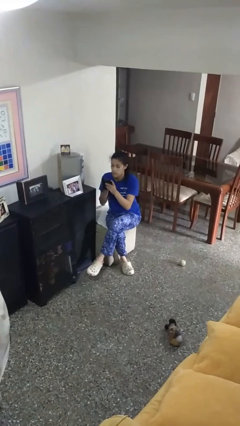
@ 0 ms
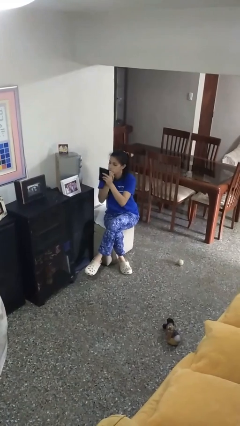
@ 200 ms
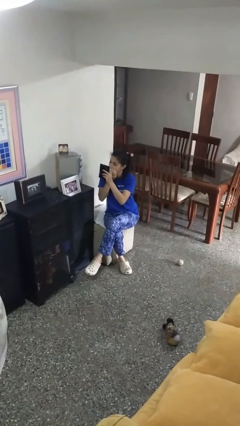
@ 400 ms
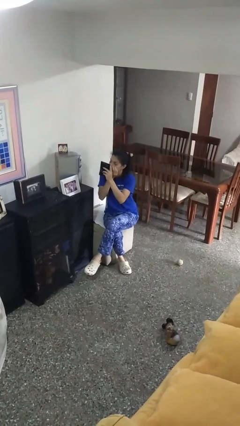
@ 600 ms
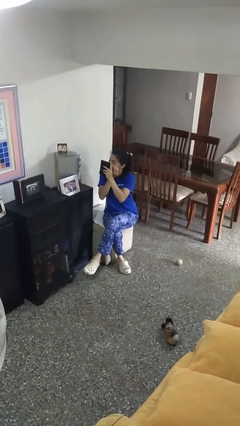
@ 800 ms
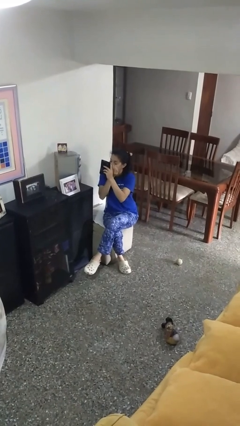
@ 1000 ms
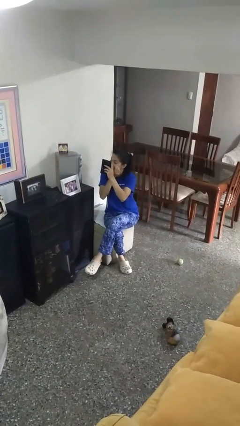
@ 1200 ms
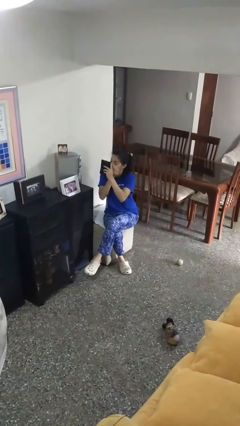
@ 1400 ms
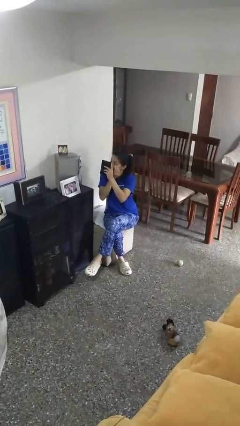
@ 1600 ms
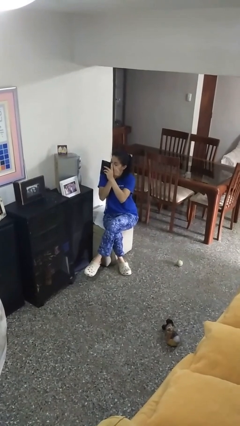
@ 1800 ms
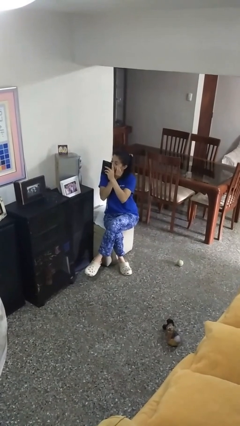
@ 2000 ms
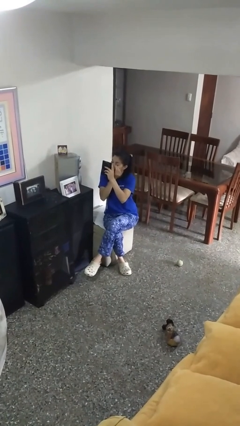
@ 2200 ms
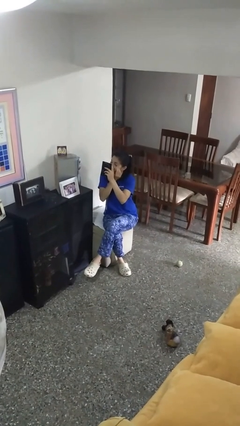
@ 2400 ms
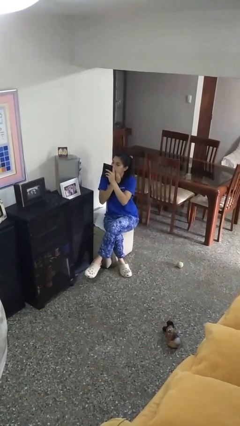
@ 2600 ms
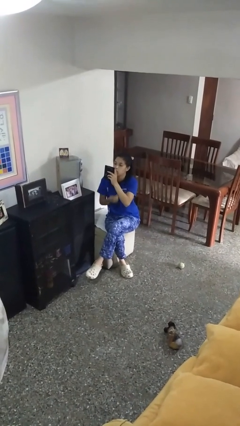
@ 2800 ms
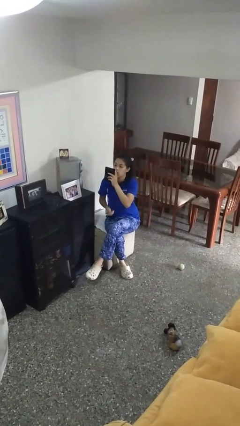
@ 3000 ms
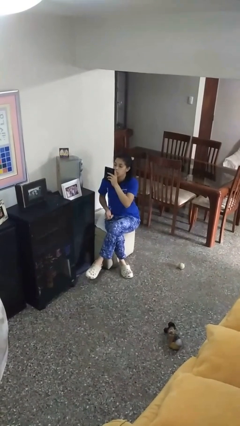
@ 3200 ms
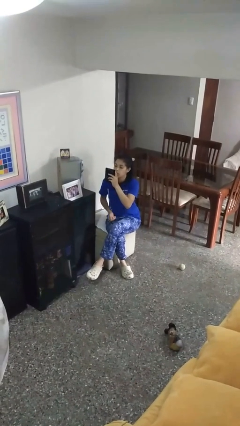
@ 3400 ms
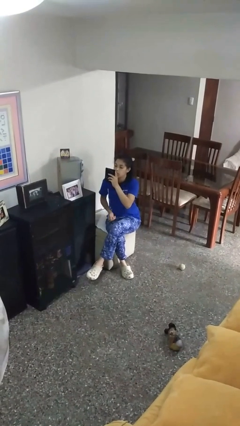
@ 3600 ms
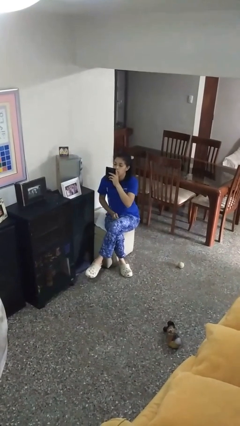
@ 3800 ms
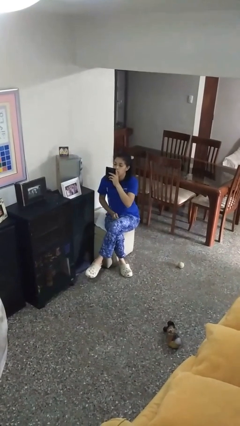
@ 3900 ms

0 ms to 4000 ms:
person applies eye makeup

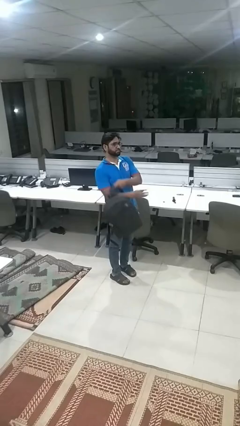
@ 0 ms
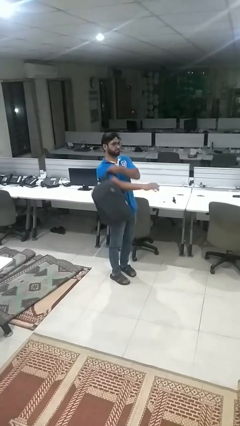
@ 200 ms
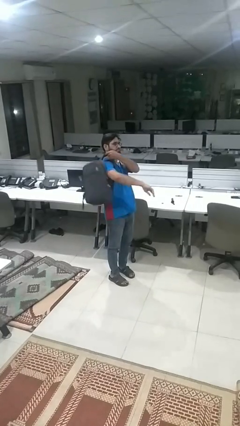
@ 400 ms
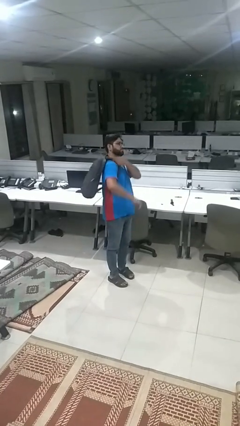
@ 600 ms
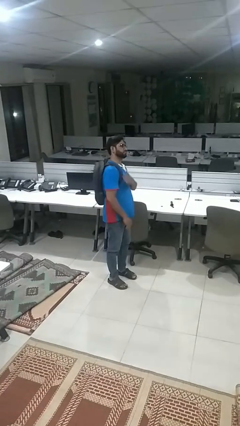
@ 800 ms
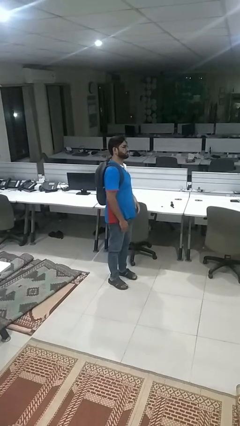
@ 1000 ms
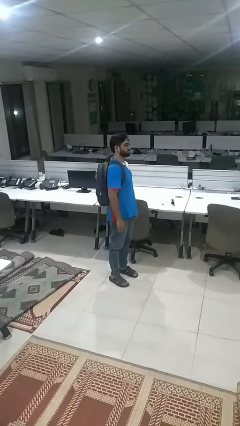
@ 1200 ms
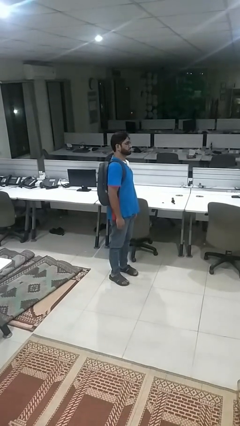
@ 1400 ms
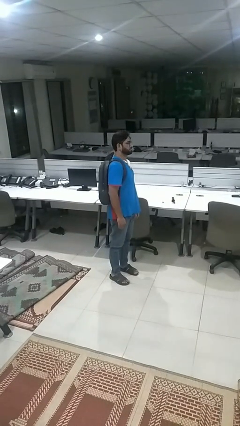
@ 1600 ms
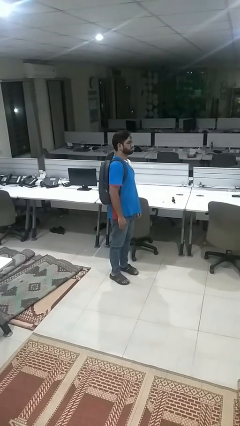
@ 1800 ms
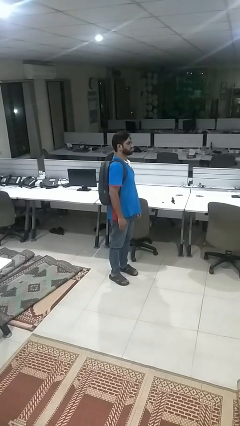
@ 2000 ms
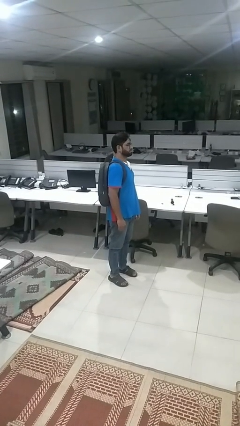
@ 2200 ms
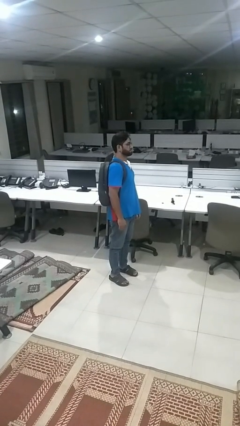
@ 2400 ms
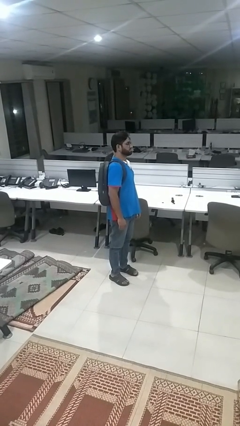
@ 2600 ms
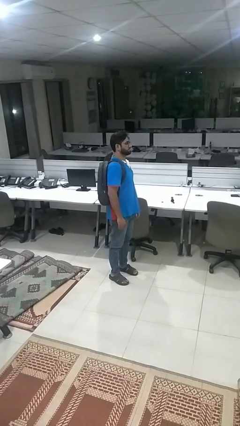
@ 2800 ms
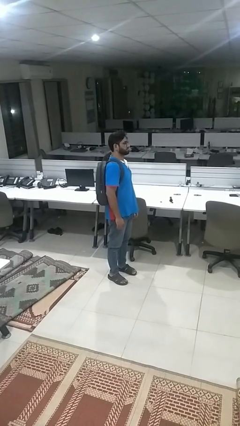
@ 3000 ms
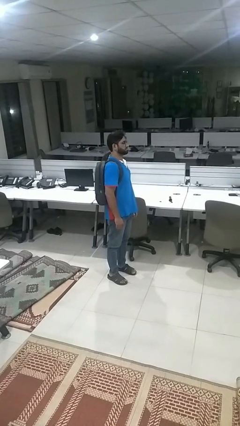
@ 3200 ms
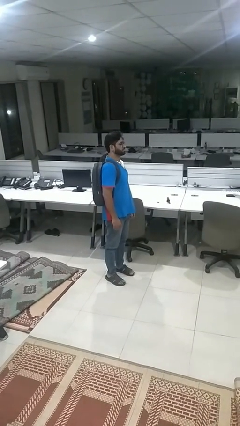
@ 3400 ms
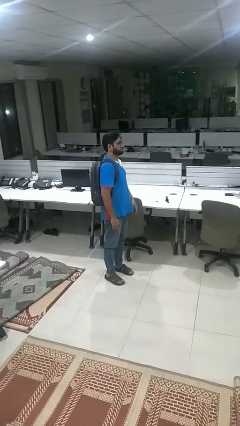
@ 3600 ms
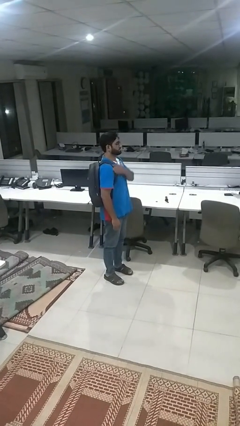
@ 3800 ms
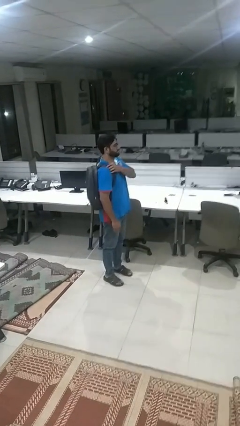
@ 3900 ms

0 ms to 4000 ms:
person puts on backpack

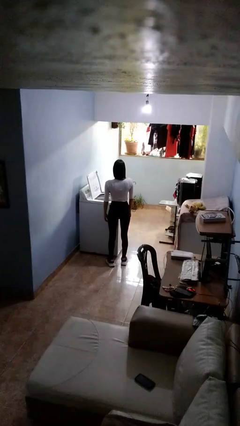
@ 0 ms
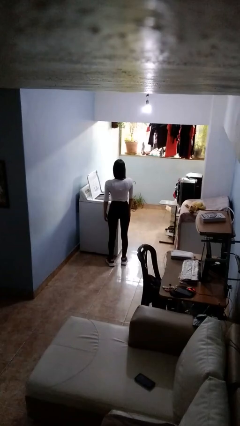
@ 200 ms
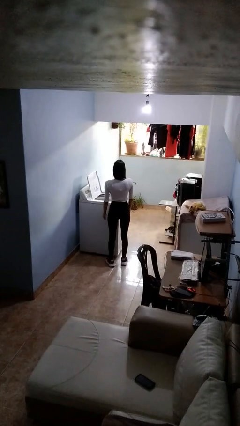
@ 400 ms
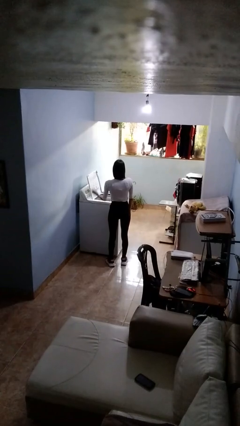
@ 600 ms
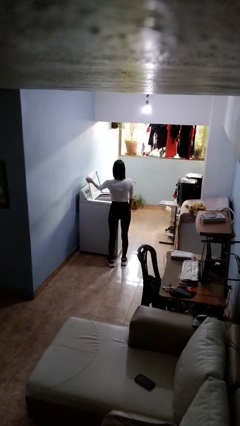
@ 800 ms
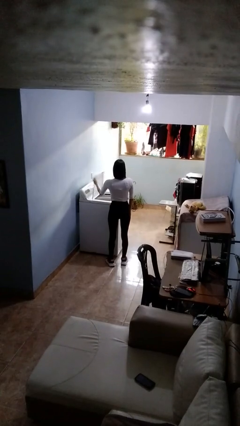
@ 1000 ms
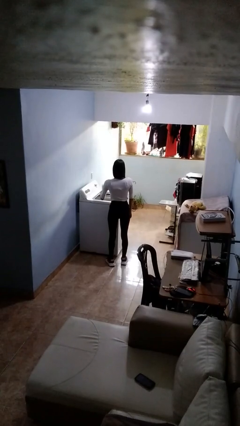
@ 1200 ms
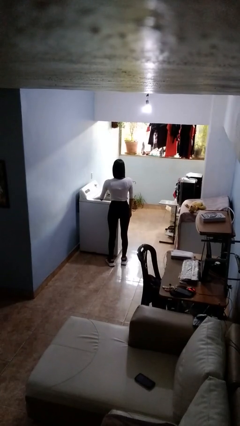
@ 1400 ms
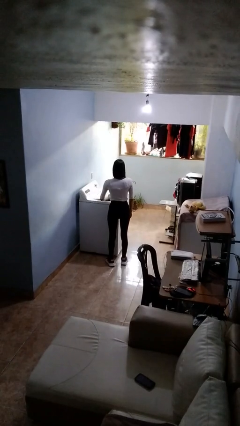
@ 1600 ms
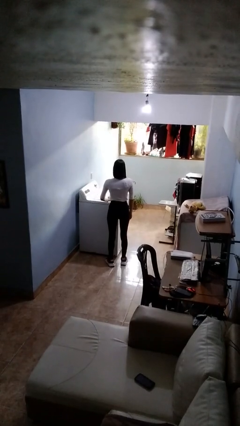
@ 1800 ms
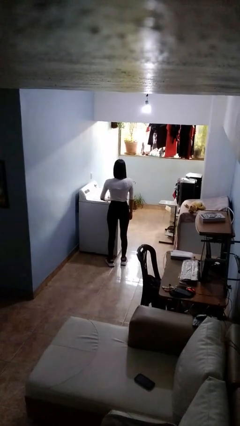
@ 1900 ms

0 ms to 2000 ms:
person closes clothes washer

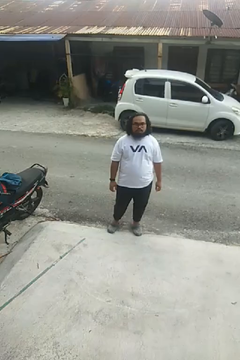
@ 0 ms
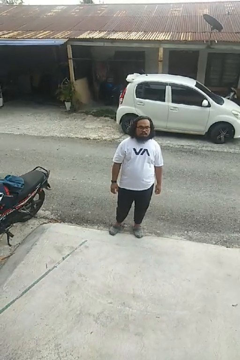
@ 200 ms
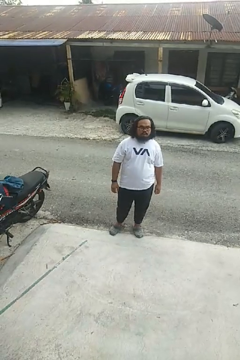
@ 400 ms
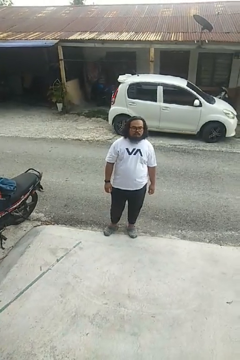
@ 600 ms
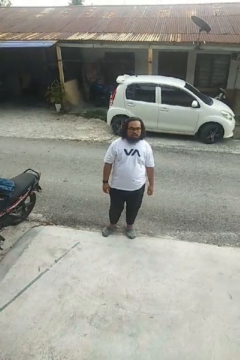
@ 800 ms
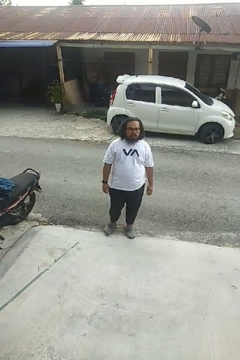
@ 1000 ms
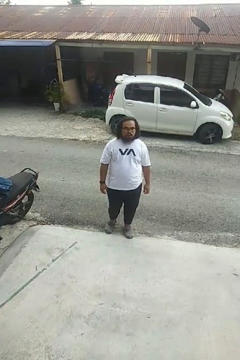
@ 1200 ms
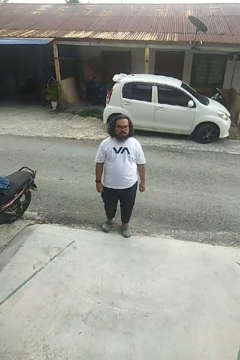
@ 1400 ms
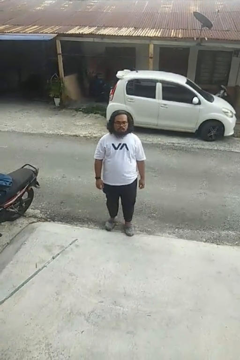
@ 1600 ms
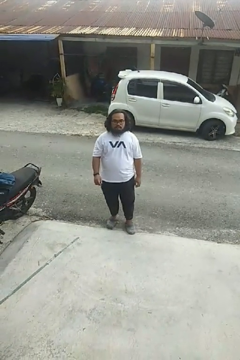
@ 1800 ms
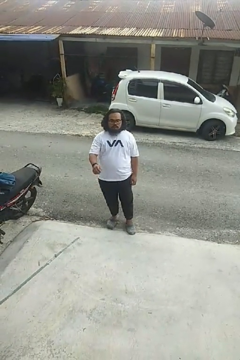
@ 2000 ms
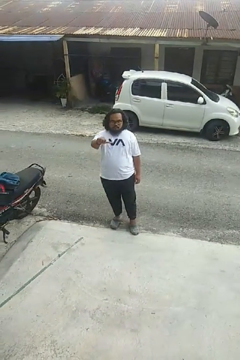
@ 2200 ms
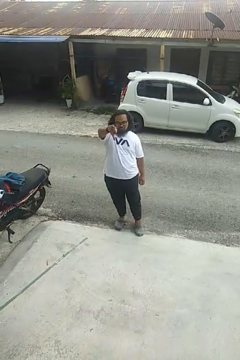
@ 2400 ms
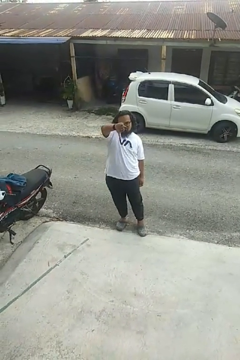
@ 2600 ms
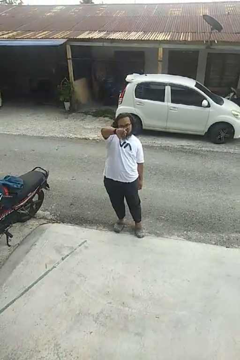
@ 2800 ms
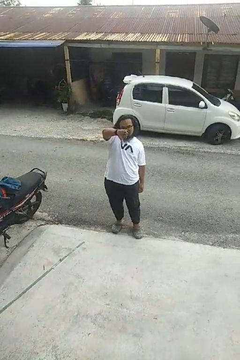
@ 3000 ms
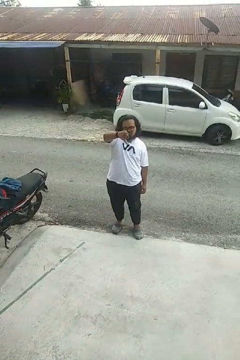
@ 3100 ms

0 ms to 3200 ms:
person gestures thumbs down

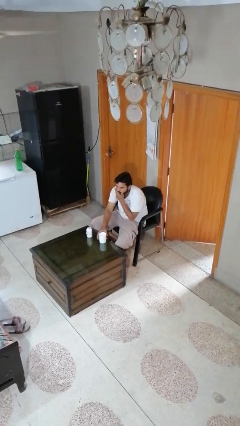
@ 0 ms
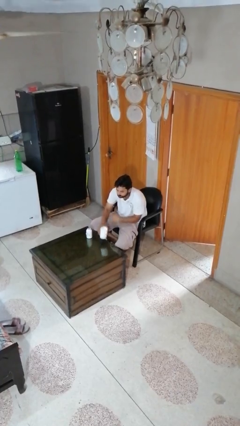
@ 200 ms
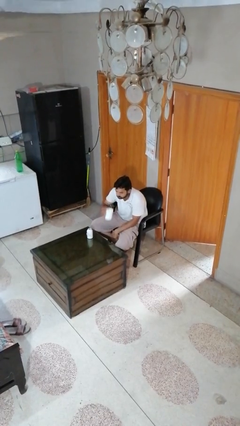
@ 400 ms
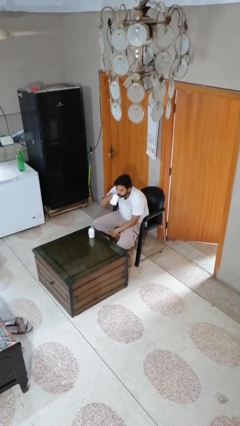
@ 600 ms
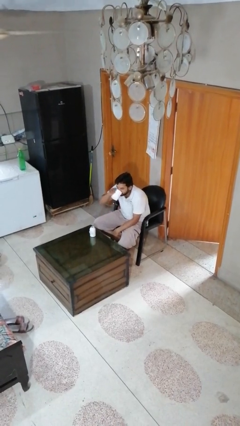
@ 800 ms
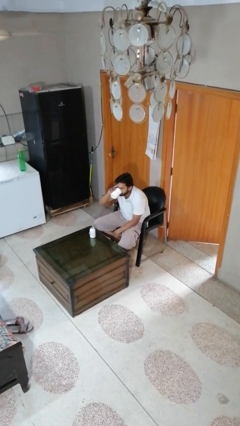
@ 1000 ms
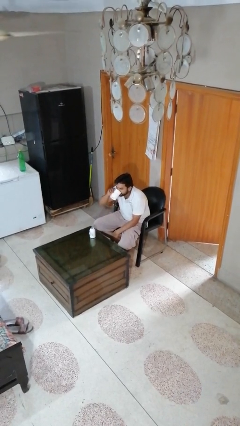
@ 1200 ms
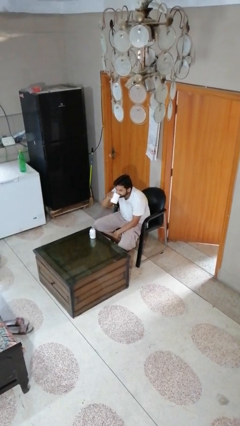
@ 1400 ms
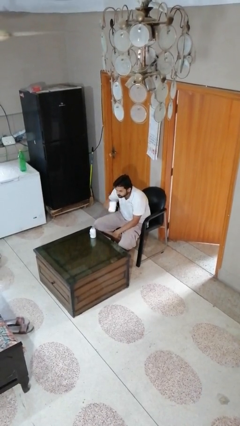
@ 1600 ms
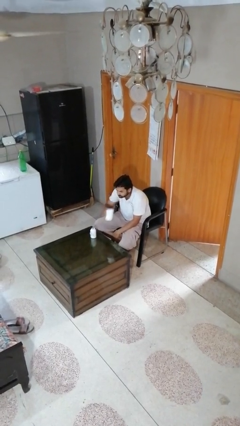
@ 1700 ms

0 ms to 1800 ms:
person drinks from cup

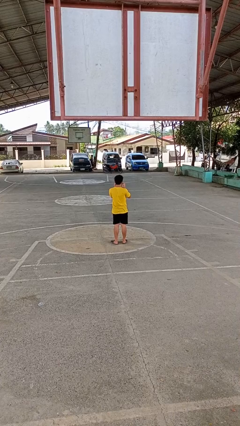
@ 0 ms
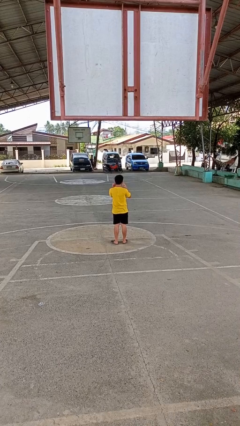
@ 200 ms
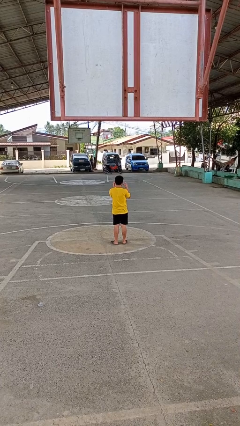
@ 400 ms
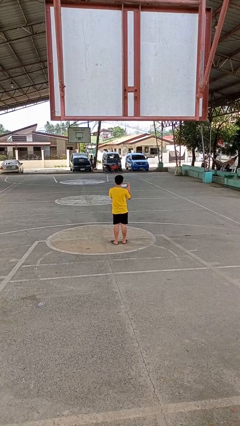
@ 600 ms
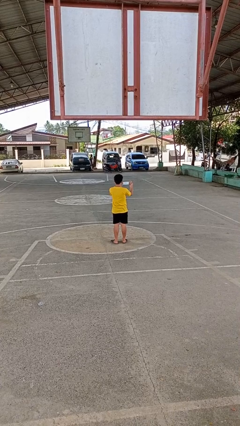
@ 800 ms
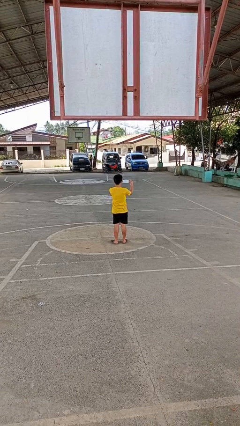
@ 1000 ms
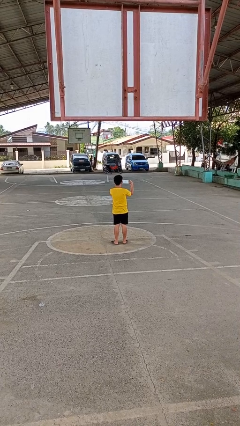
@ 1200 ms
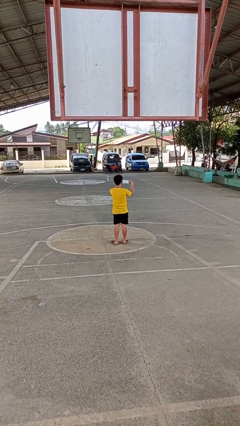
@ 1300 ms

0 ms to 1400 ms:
person takes off facemask

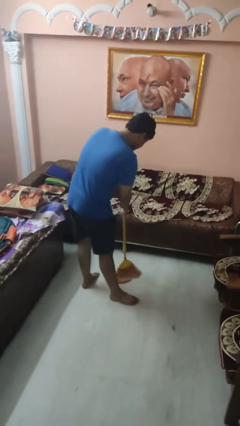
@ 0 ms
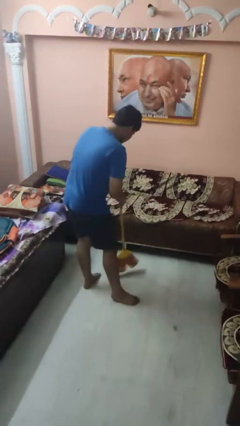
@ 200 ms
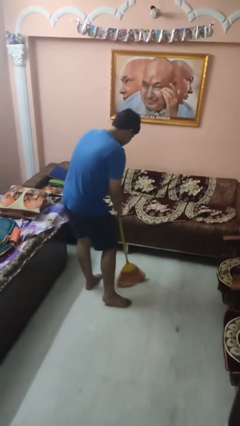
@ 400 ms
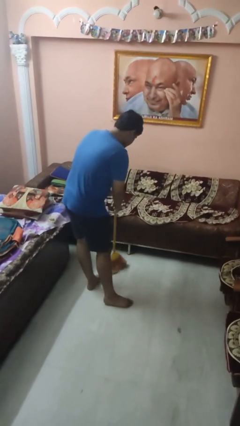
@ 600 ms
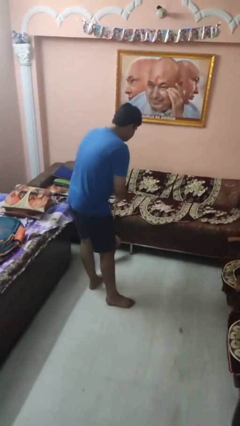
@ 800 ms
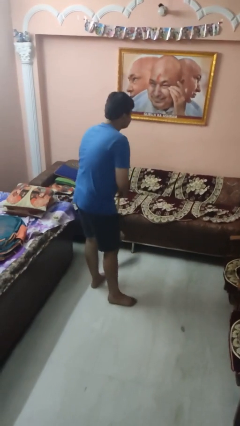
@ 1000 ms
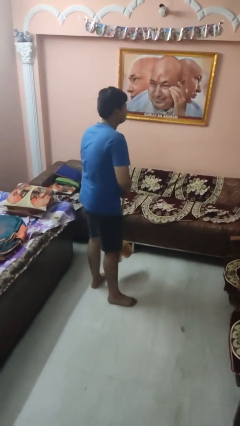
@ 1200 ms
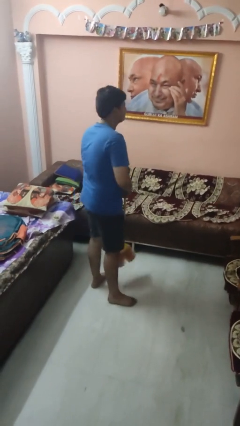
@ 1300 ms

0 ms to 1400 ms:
person sweeps floor
